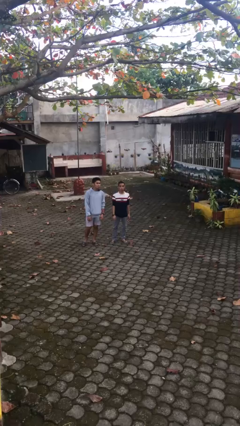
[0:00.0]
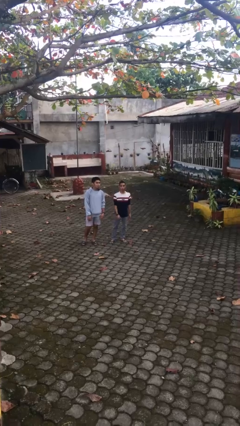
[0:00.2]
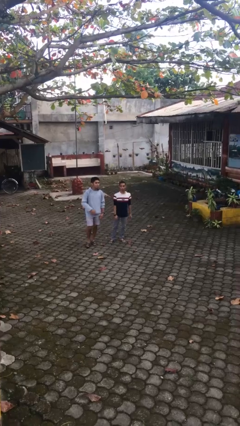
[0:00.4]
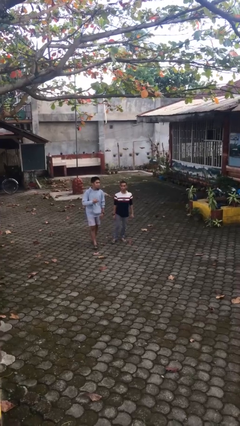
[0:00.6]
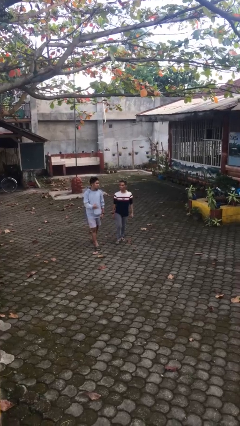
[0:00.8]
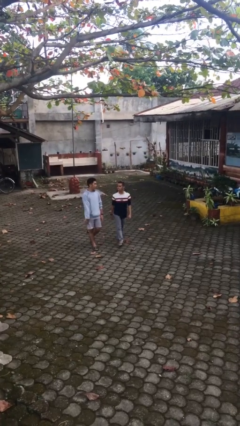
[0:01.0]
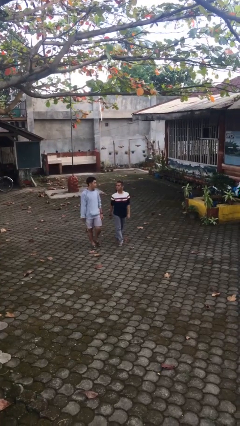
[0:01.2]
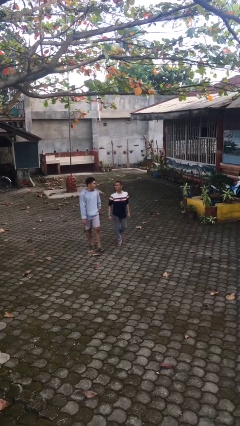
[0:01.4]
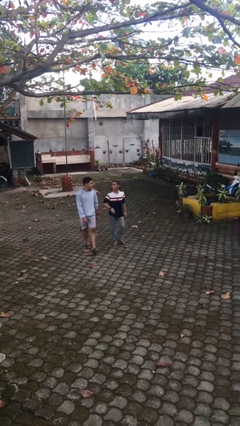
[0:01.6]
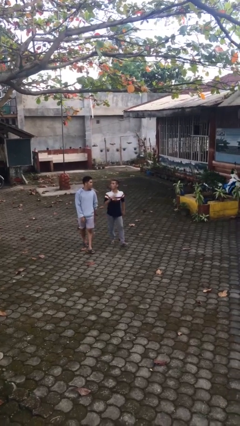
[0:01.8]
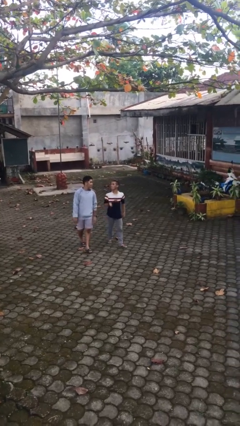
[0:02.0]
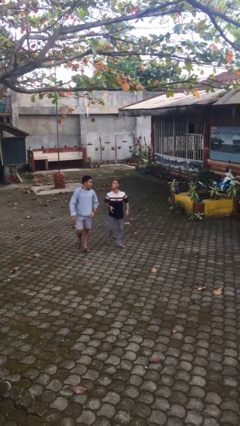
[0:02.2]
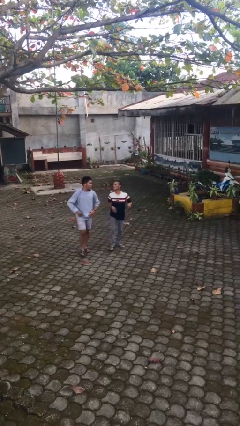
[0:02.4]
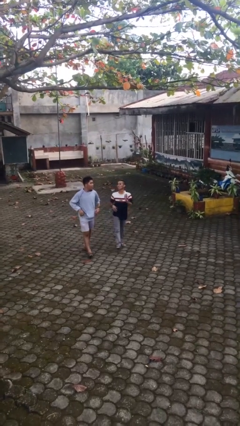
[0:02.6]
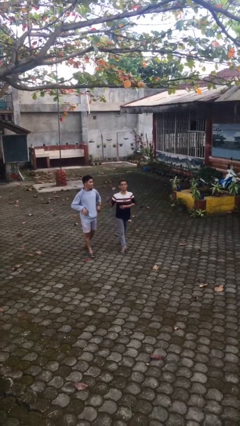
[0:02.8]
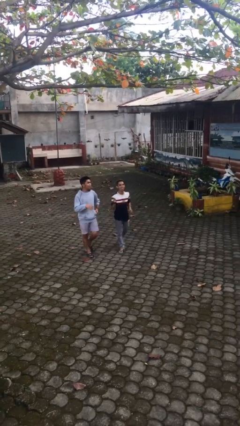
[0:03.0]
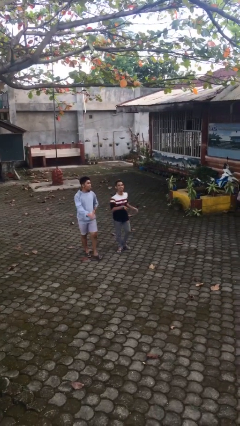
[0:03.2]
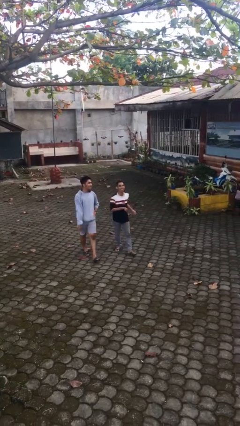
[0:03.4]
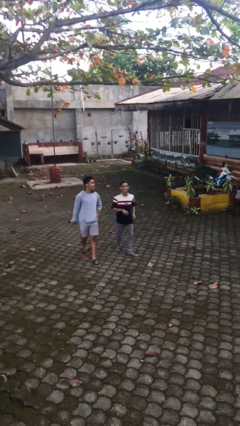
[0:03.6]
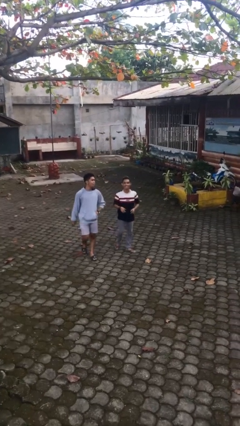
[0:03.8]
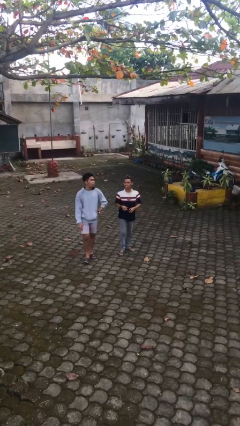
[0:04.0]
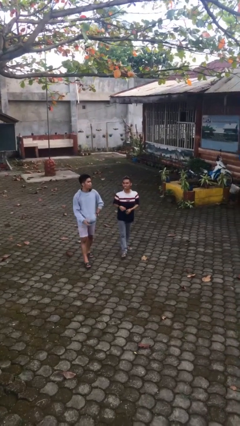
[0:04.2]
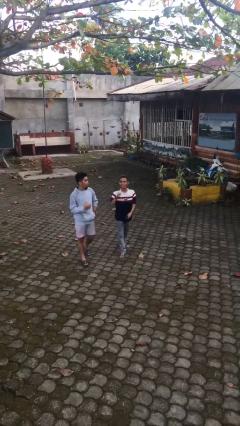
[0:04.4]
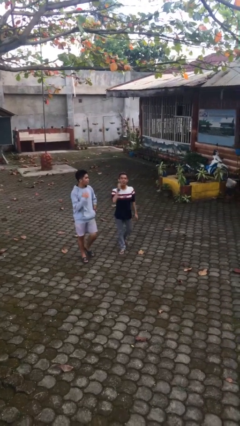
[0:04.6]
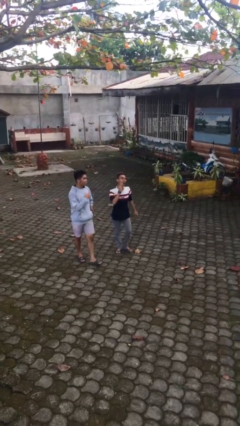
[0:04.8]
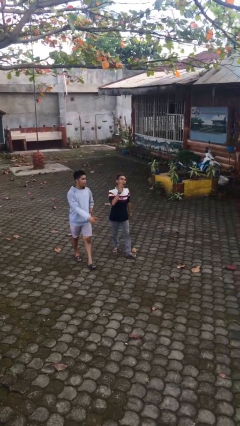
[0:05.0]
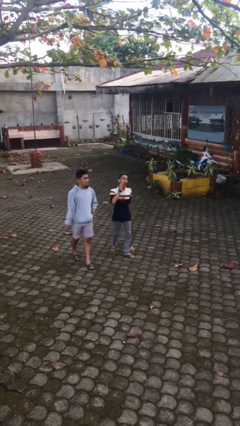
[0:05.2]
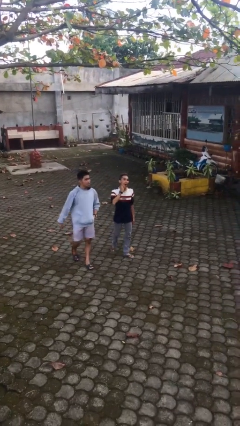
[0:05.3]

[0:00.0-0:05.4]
person talks to person

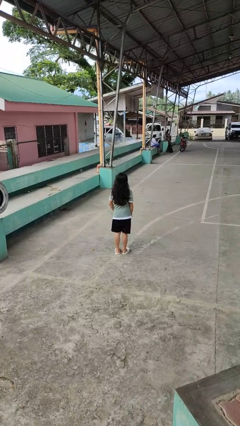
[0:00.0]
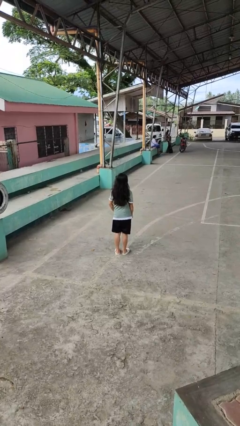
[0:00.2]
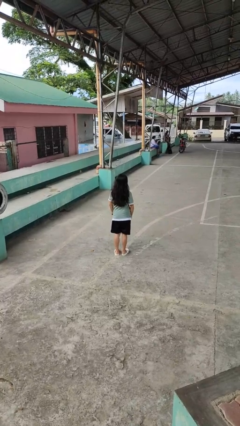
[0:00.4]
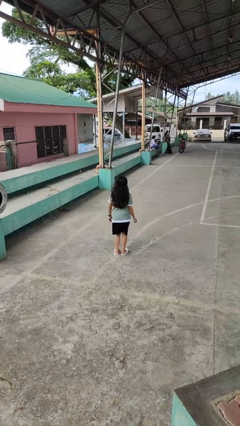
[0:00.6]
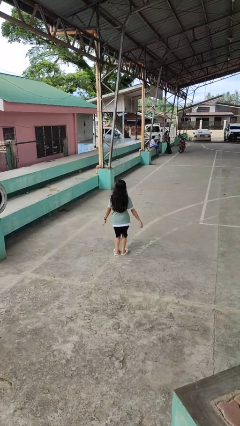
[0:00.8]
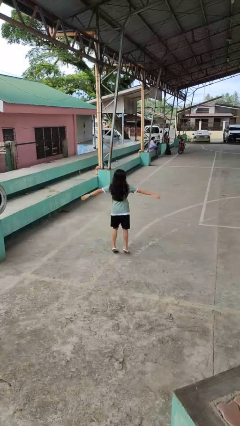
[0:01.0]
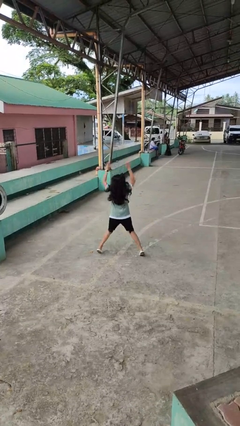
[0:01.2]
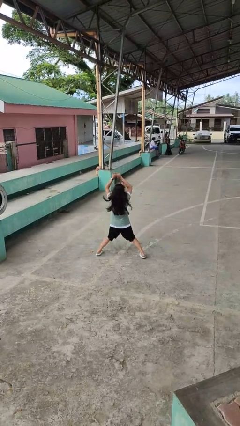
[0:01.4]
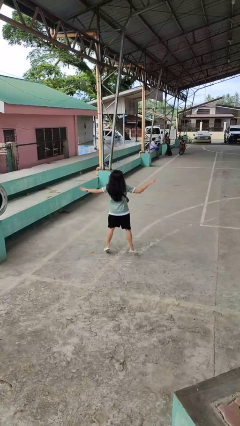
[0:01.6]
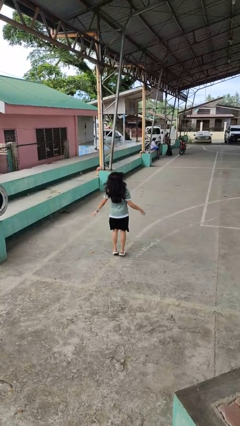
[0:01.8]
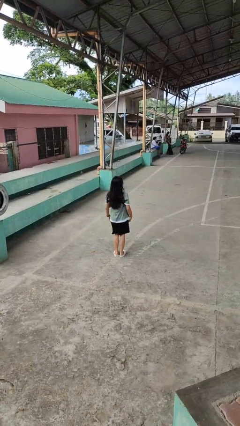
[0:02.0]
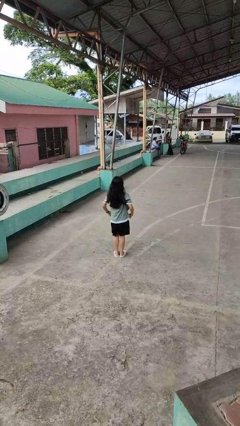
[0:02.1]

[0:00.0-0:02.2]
person exercises with jumping jacks

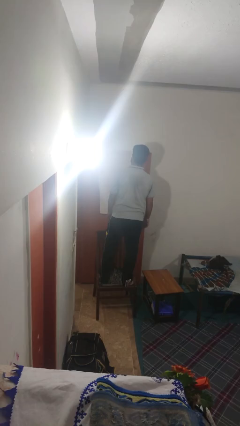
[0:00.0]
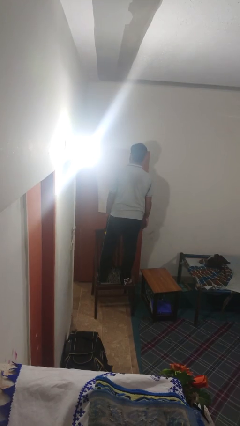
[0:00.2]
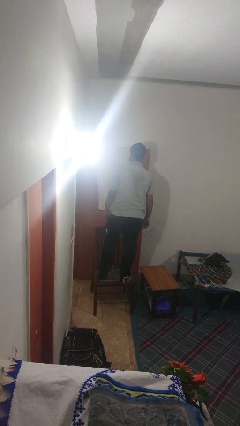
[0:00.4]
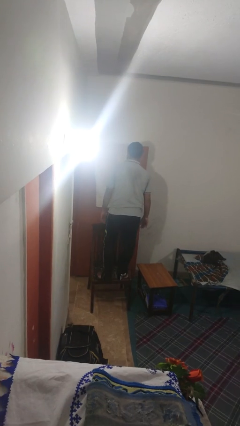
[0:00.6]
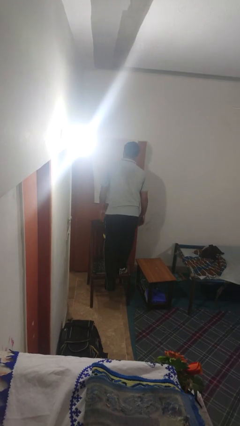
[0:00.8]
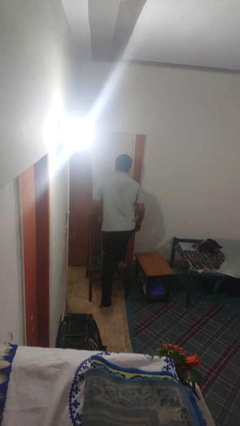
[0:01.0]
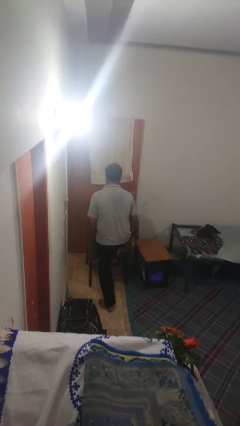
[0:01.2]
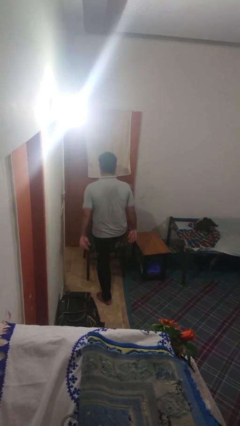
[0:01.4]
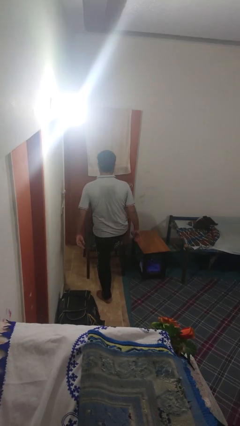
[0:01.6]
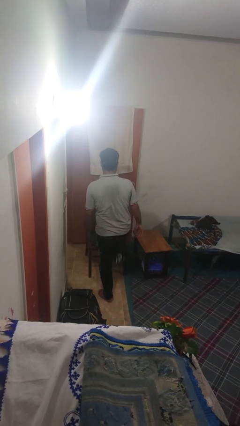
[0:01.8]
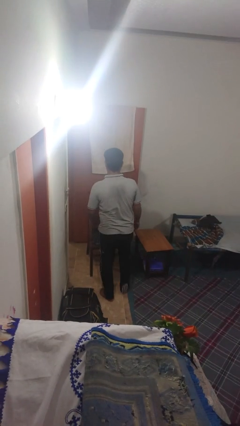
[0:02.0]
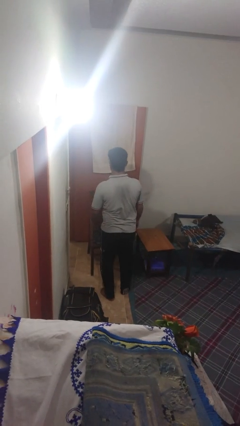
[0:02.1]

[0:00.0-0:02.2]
person climbs off chair

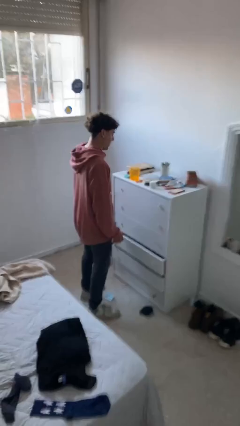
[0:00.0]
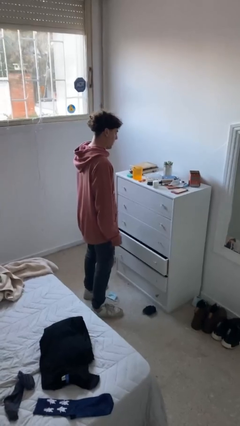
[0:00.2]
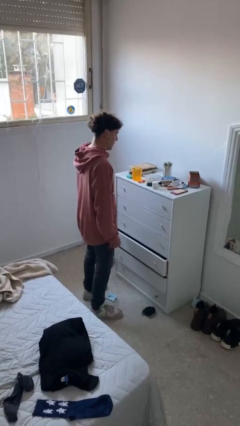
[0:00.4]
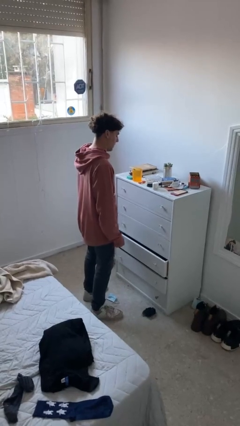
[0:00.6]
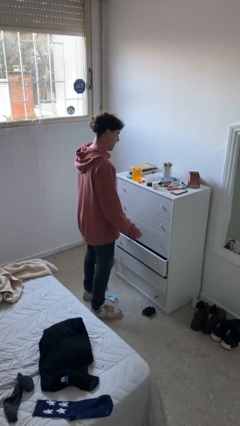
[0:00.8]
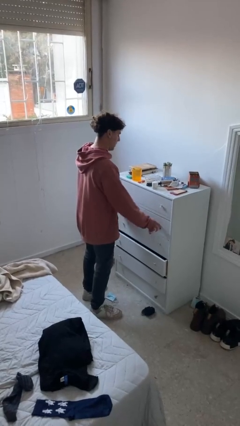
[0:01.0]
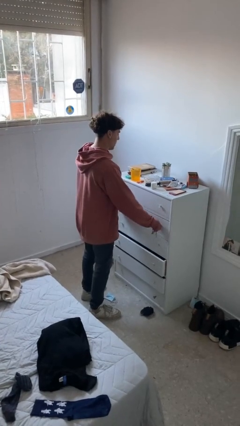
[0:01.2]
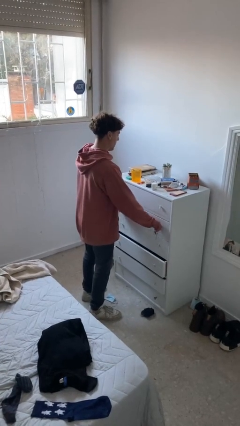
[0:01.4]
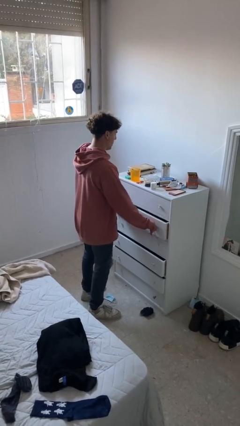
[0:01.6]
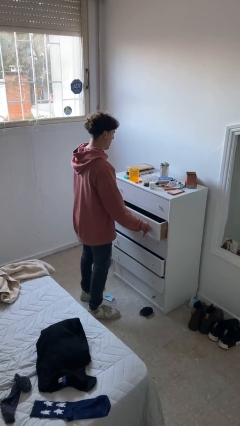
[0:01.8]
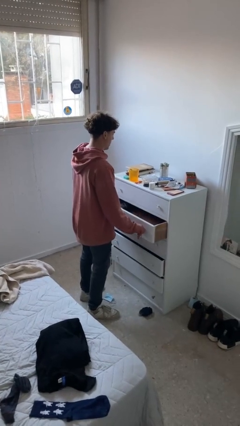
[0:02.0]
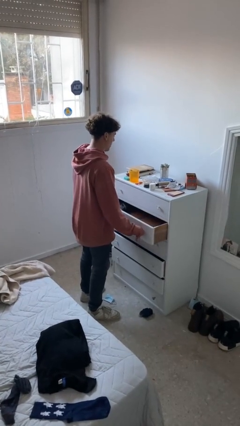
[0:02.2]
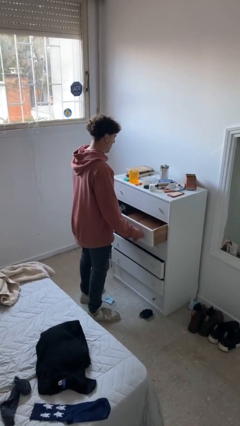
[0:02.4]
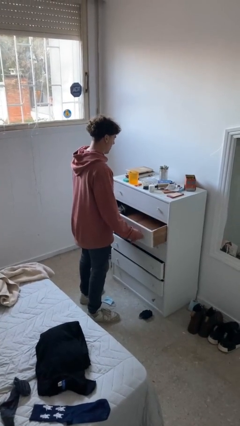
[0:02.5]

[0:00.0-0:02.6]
person opens dresser drawer

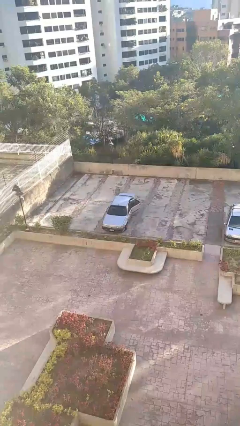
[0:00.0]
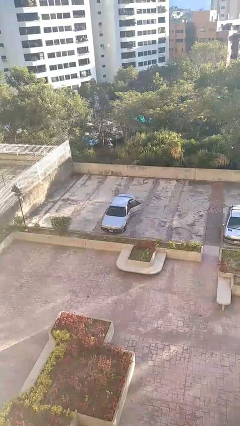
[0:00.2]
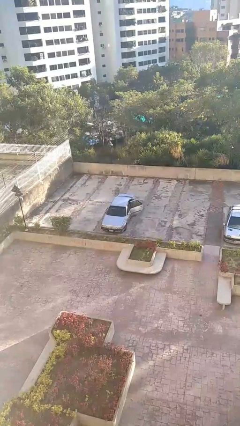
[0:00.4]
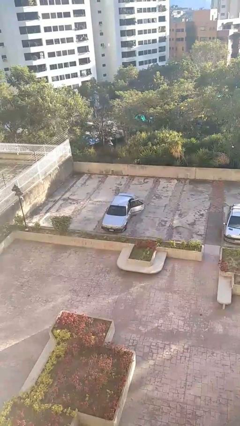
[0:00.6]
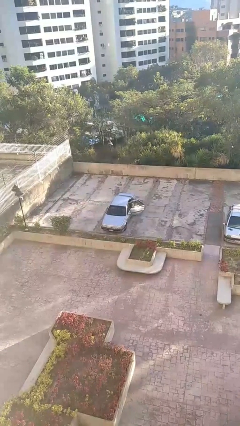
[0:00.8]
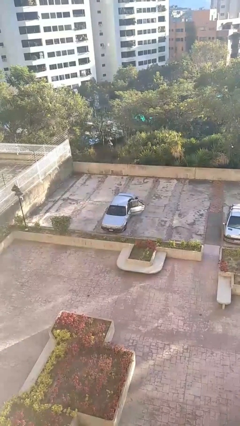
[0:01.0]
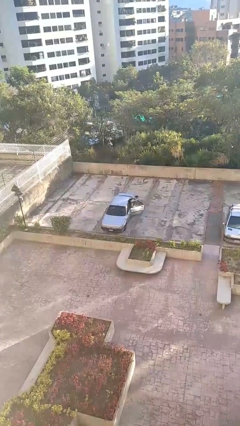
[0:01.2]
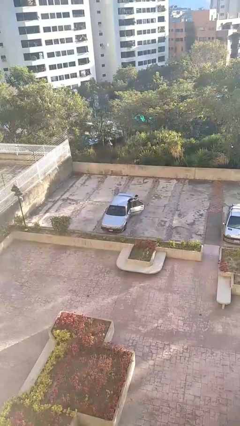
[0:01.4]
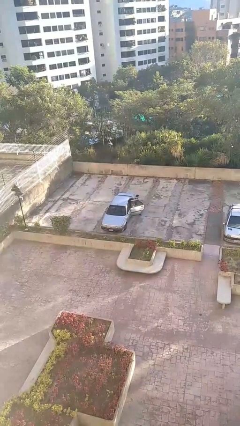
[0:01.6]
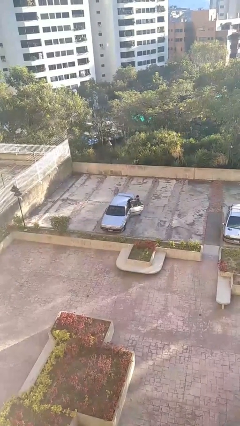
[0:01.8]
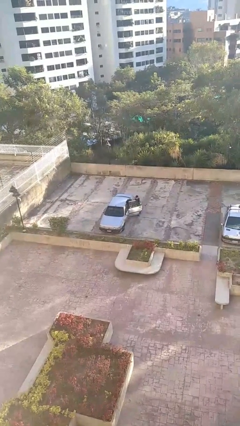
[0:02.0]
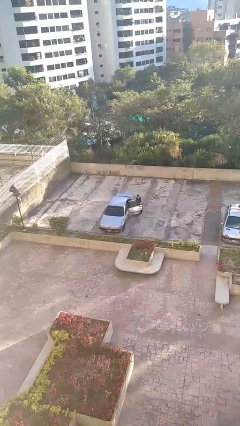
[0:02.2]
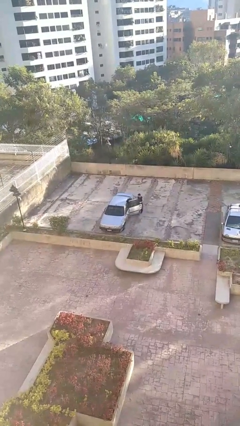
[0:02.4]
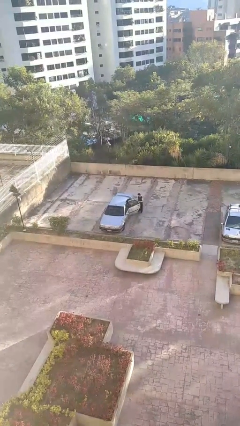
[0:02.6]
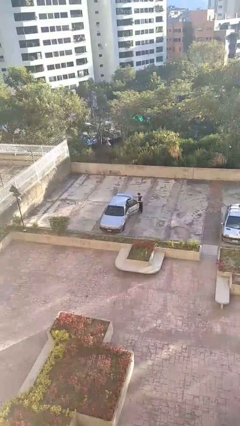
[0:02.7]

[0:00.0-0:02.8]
car drops off person

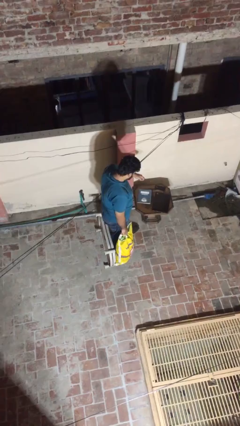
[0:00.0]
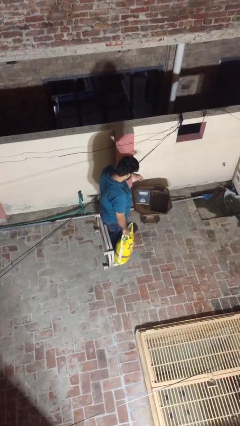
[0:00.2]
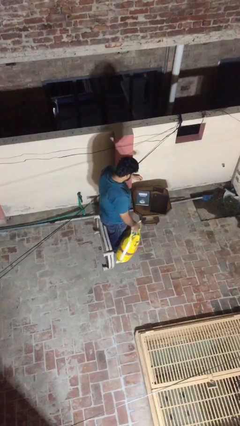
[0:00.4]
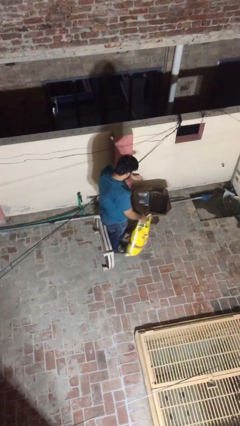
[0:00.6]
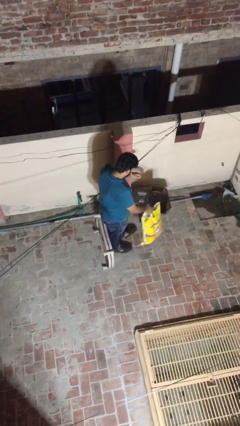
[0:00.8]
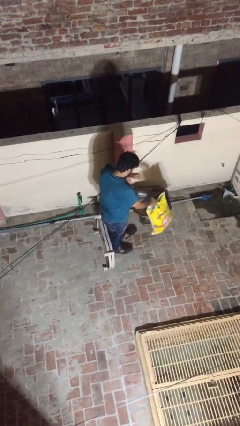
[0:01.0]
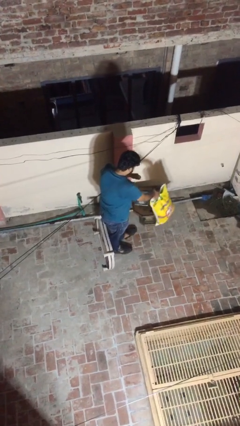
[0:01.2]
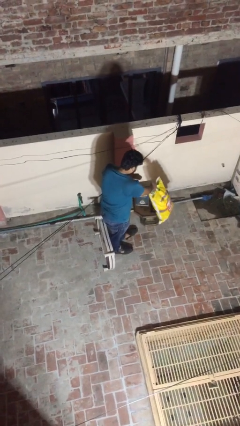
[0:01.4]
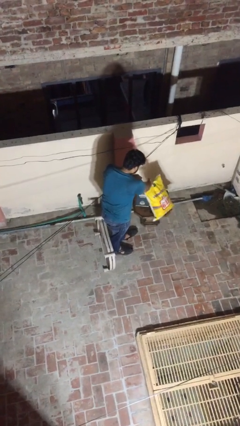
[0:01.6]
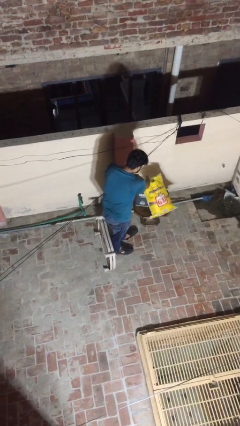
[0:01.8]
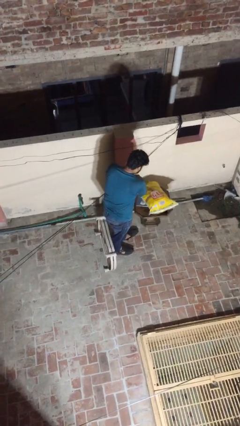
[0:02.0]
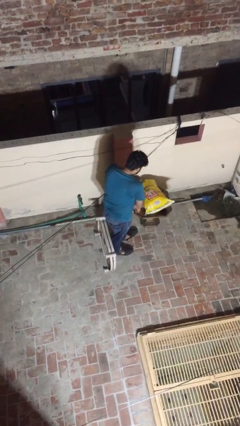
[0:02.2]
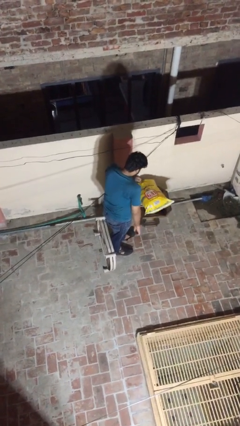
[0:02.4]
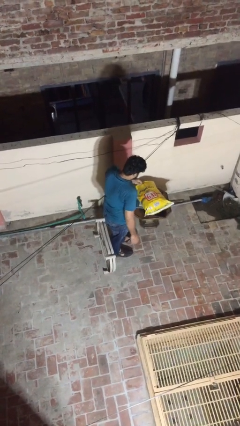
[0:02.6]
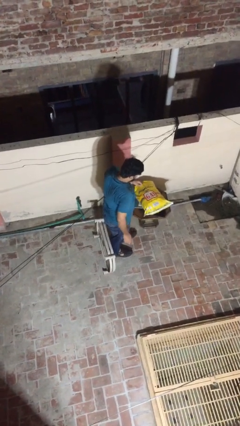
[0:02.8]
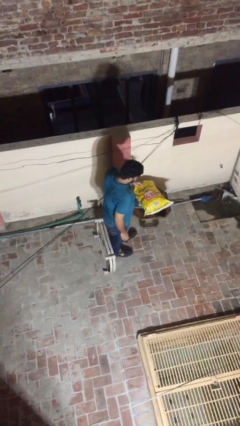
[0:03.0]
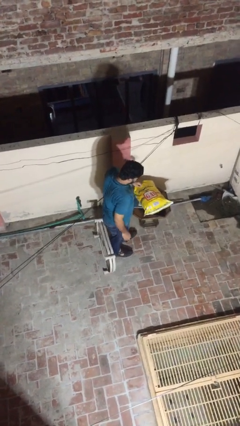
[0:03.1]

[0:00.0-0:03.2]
person puts down object on table
